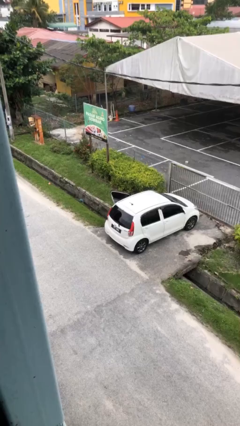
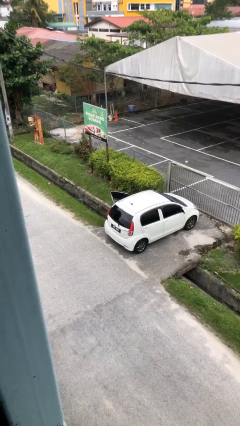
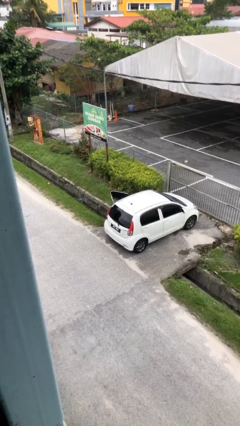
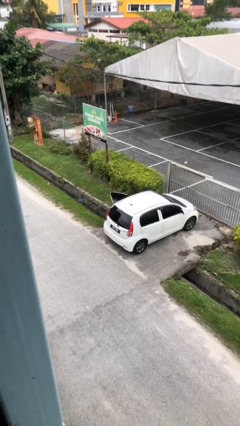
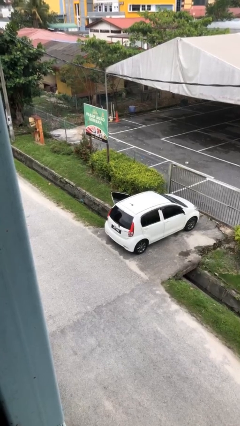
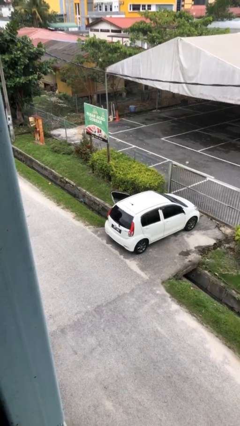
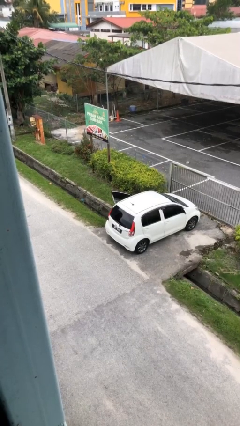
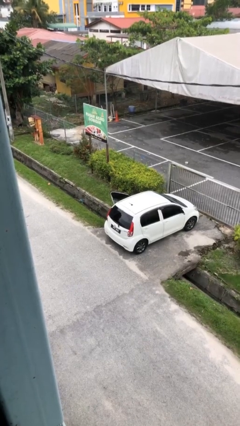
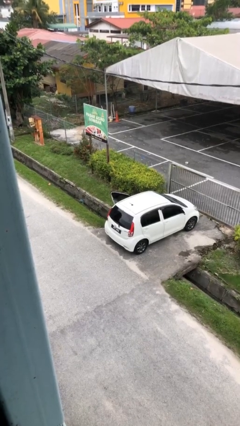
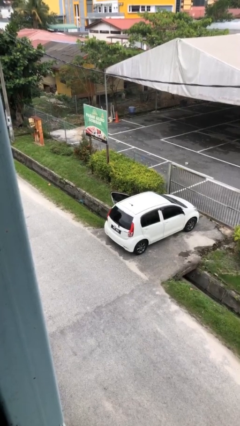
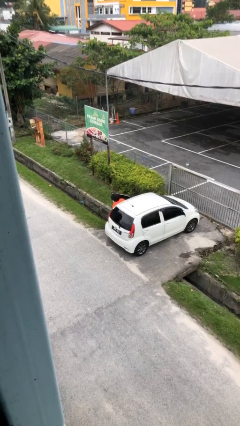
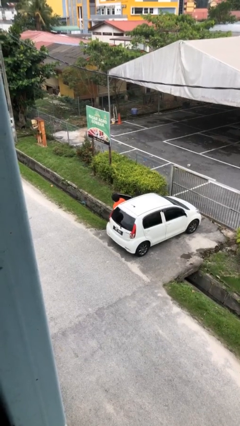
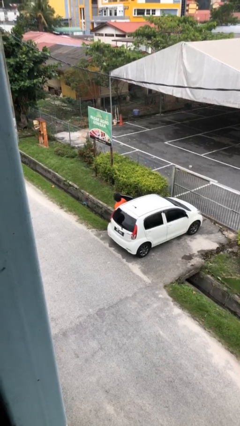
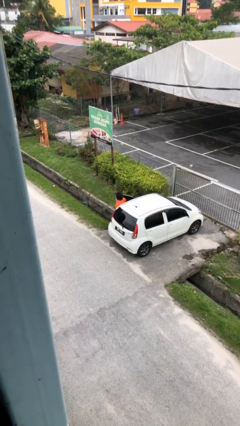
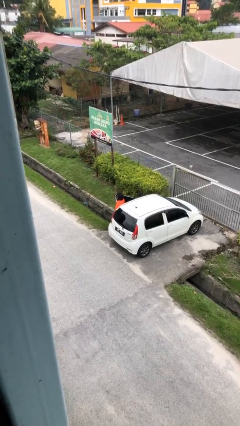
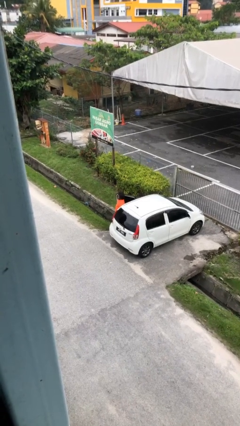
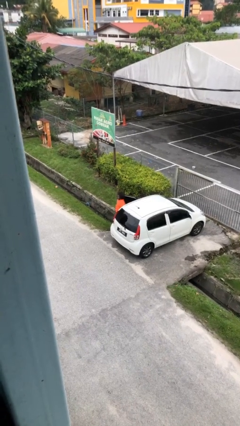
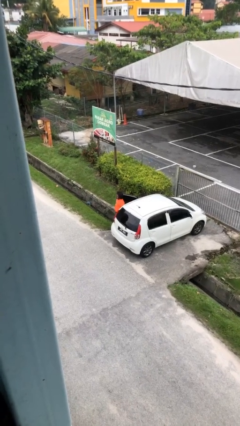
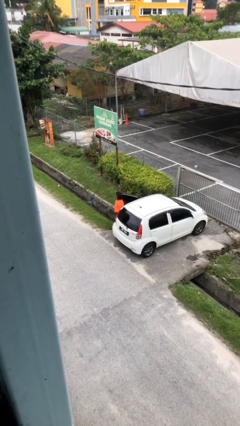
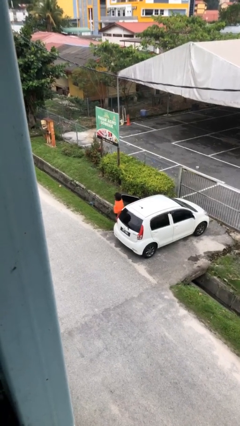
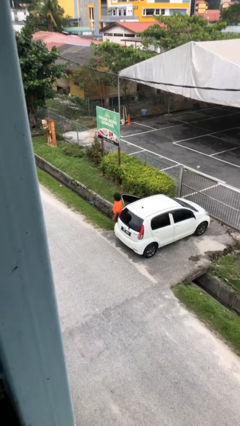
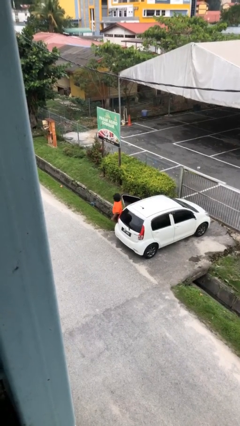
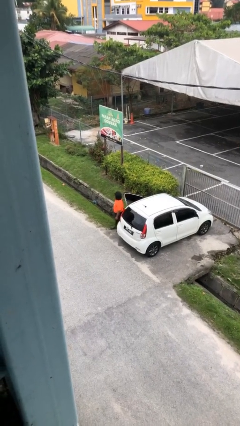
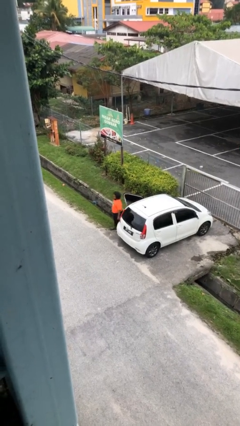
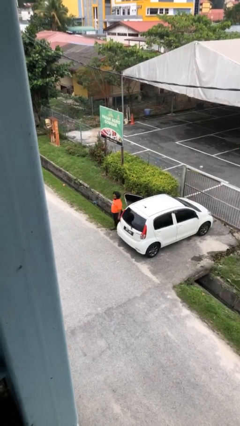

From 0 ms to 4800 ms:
person exits car

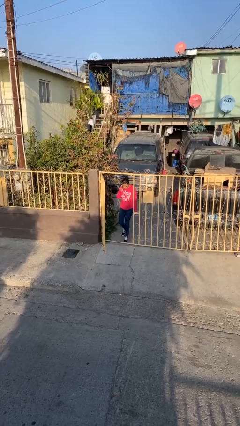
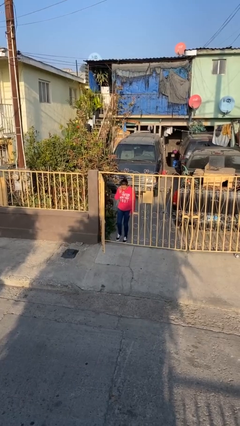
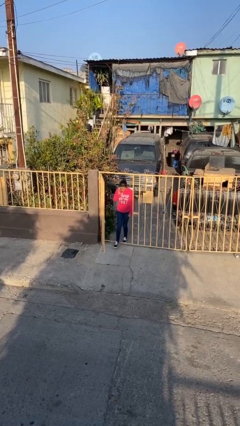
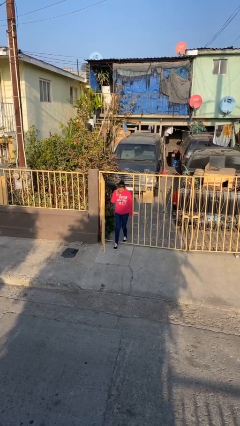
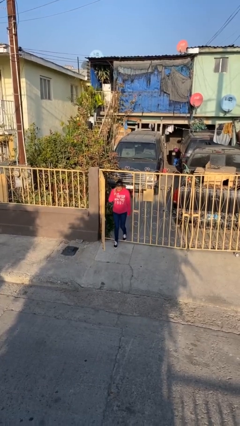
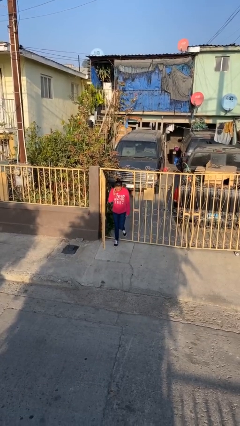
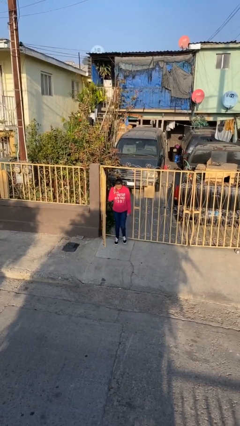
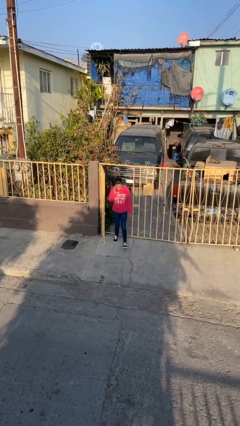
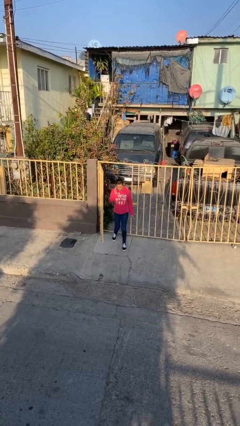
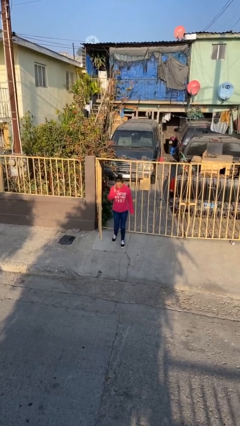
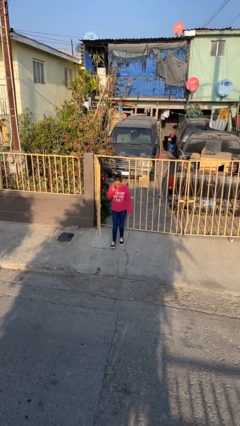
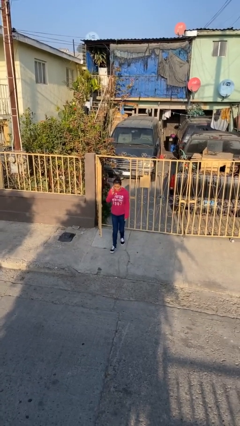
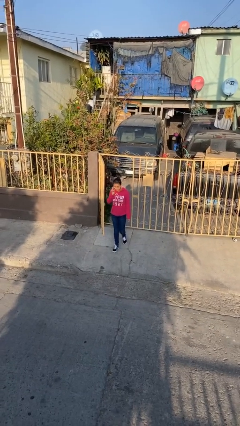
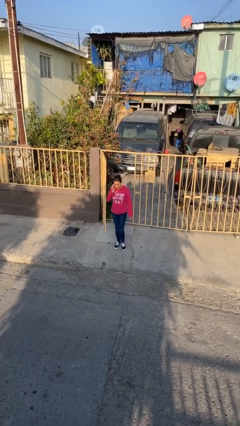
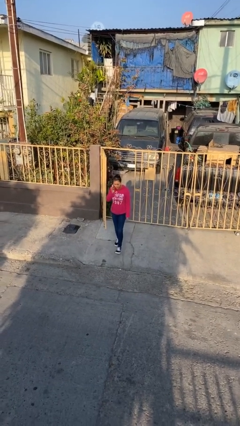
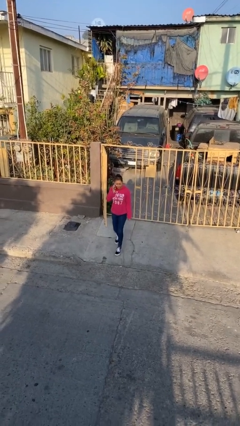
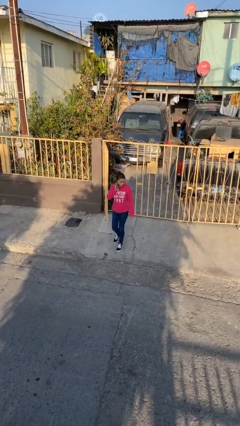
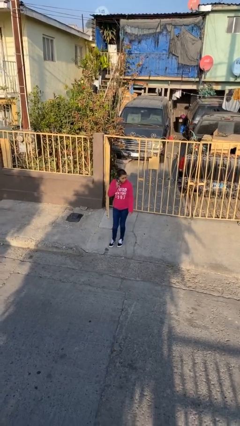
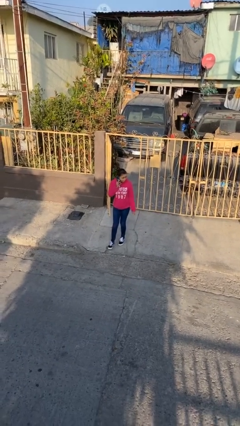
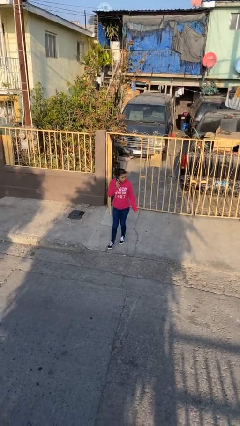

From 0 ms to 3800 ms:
person enters scene through structure

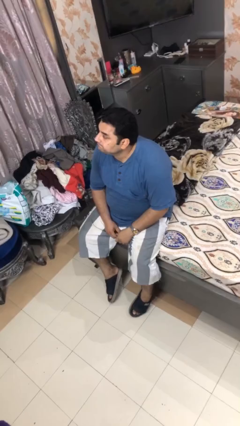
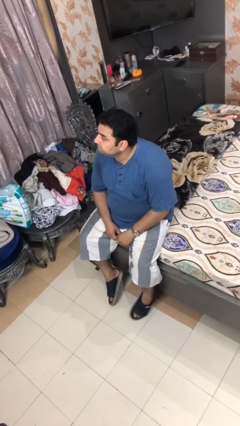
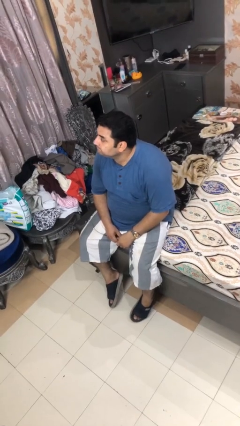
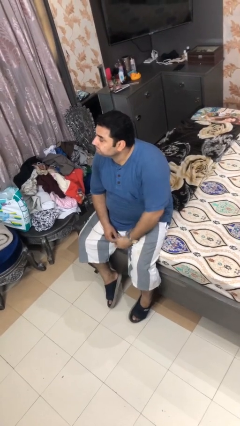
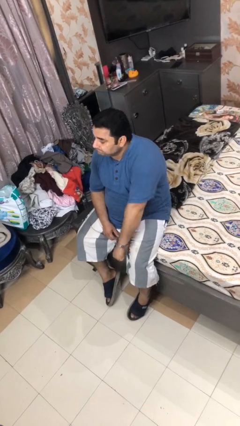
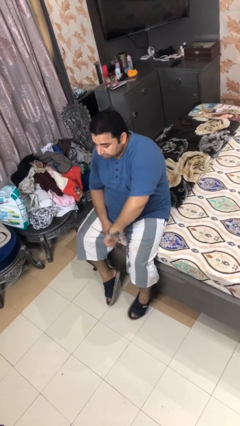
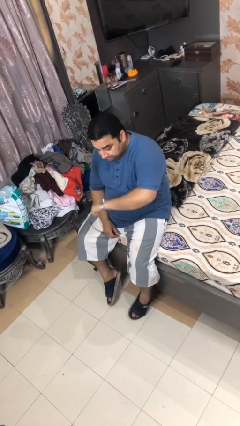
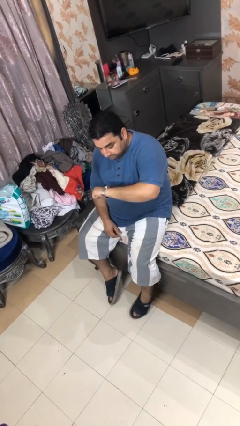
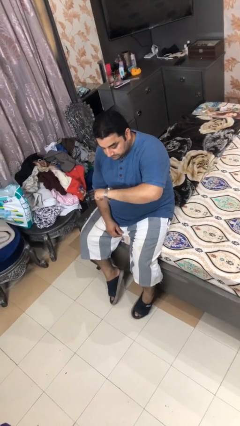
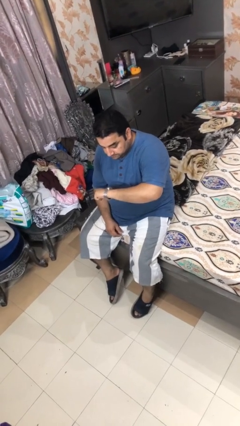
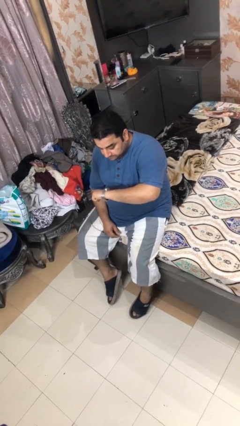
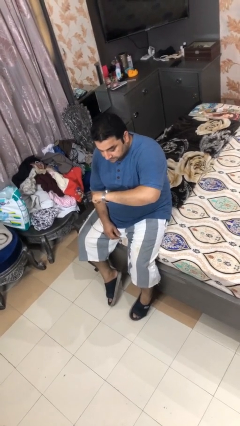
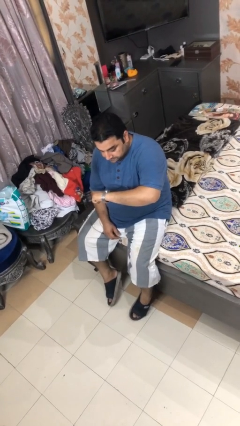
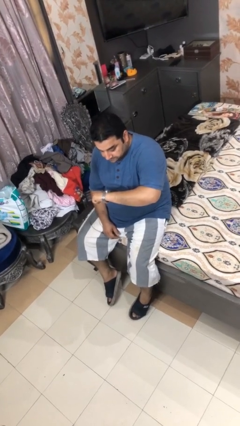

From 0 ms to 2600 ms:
person looks at wristwatch

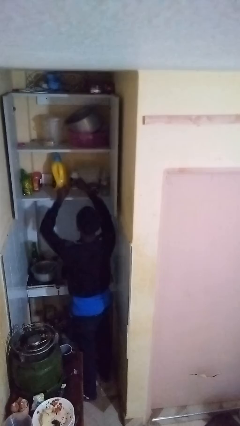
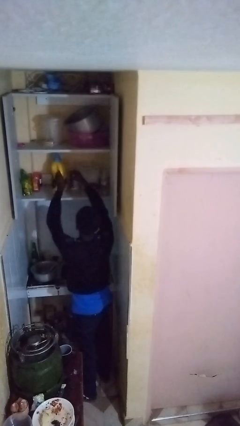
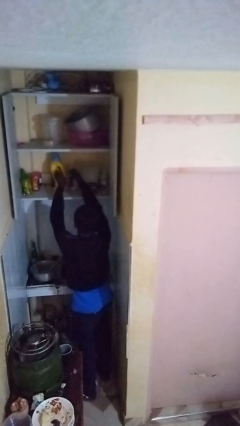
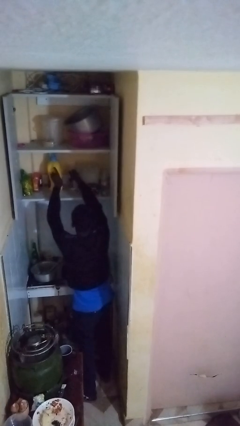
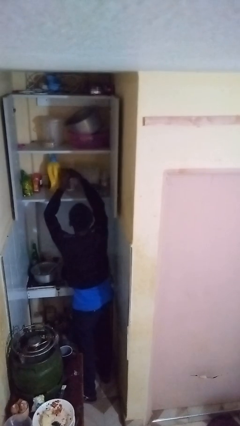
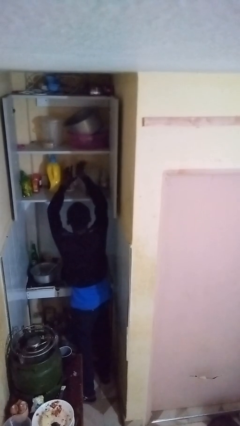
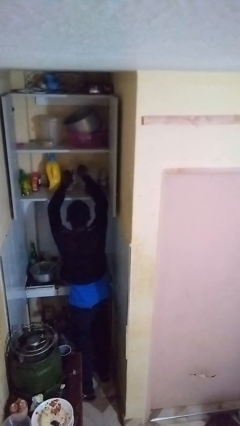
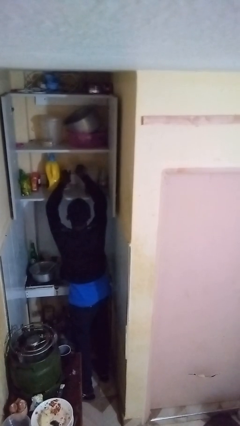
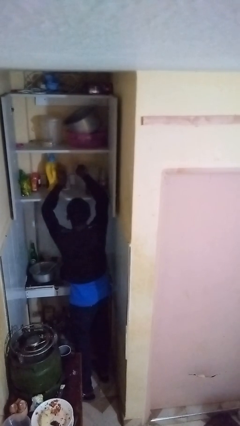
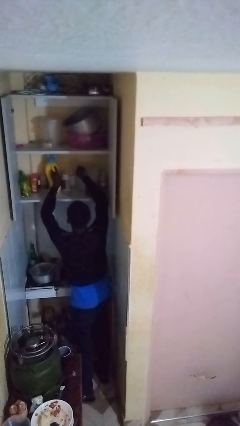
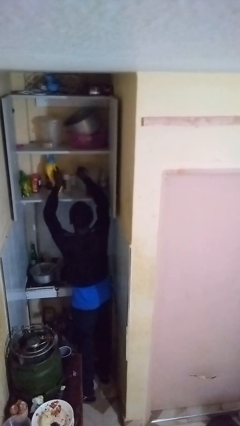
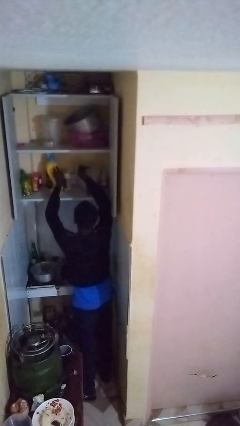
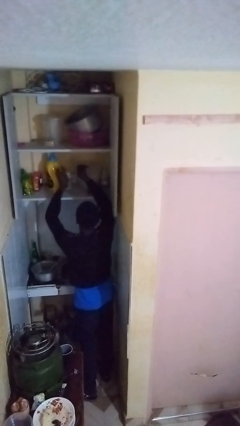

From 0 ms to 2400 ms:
person searches in kitchen drawer

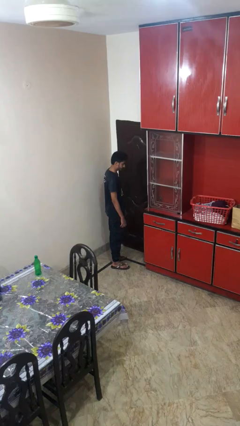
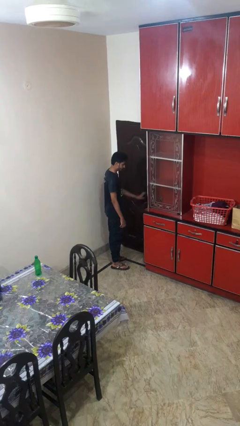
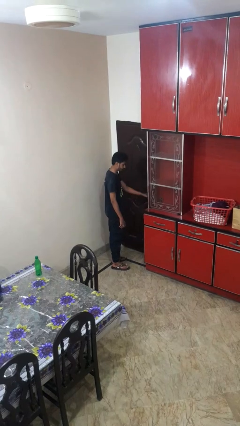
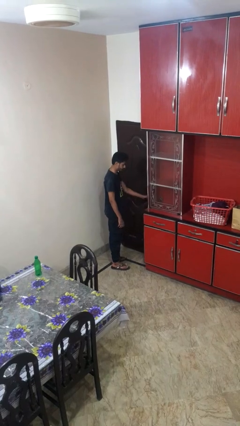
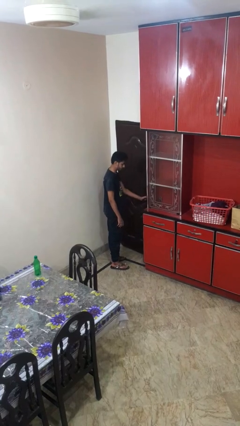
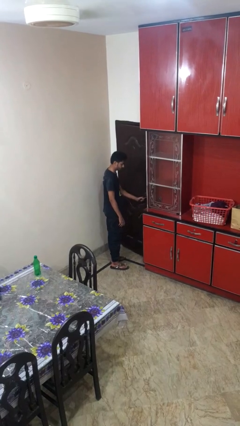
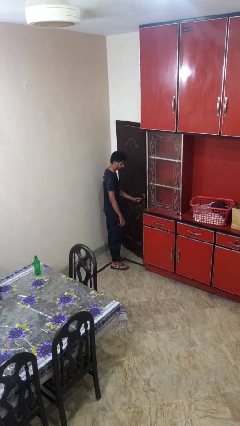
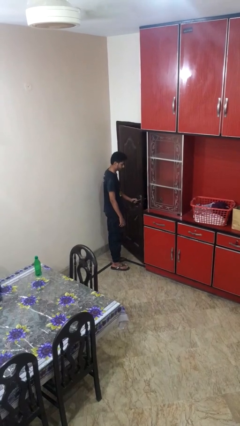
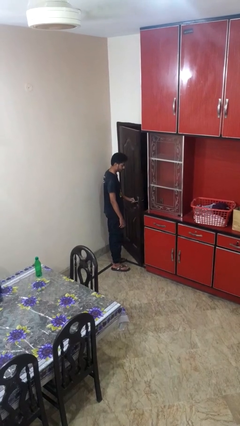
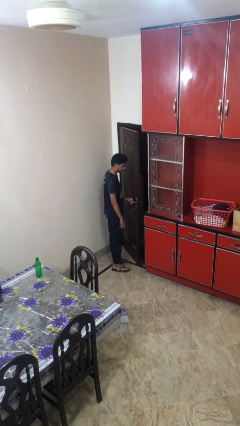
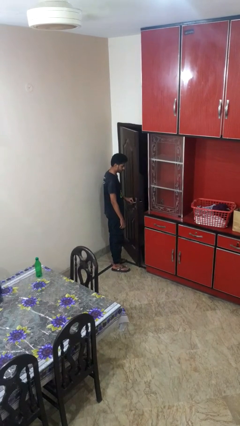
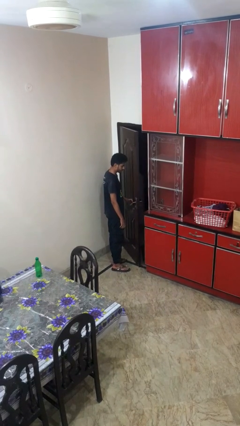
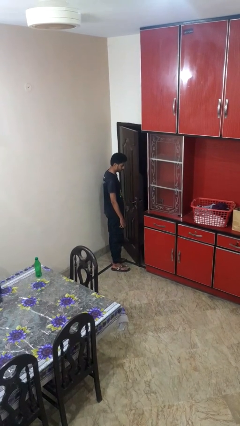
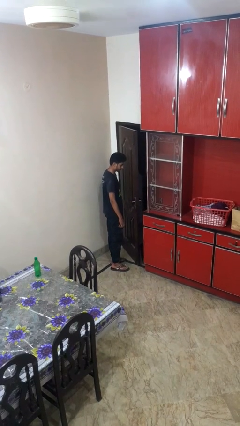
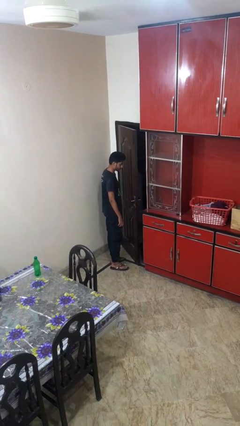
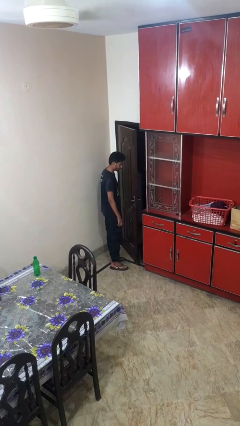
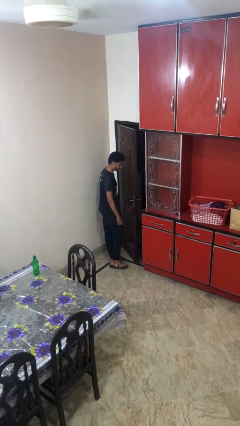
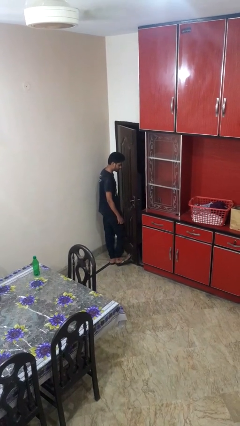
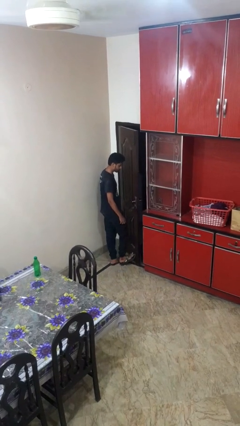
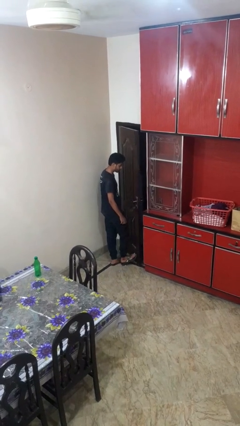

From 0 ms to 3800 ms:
person opens facility door
